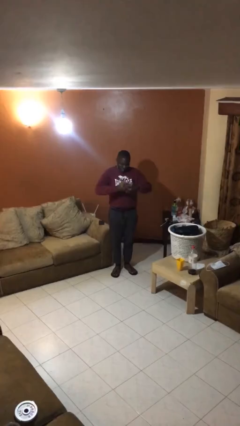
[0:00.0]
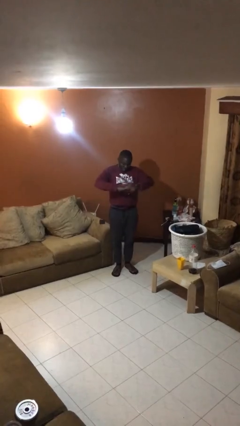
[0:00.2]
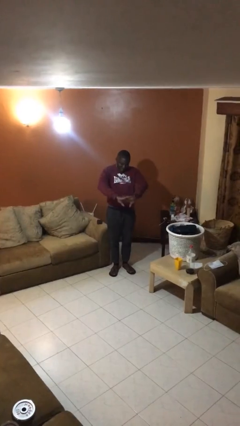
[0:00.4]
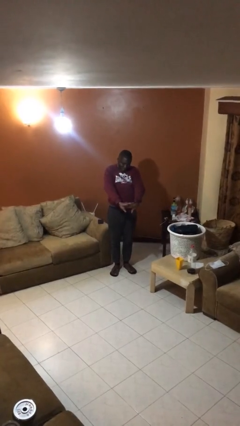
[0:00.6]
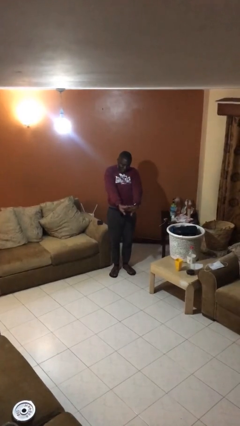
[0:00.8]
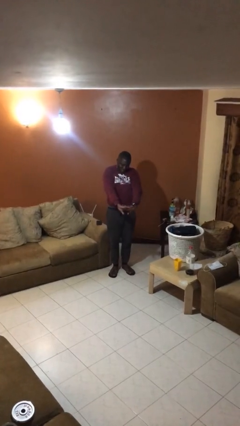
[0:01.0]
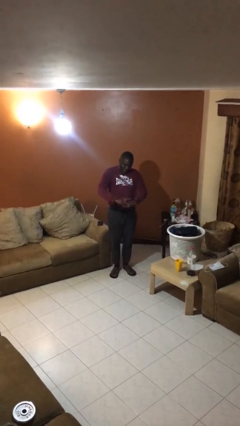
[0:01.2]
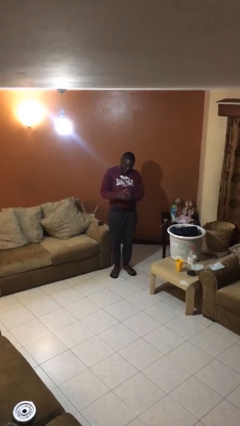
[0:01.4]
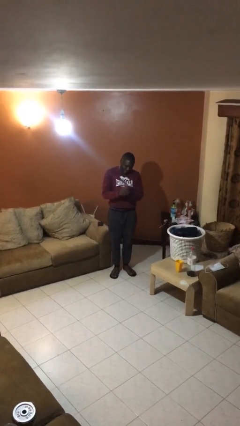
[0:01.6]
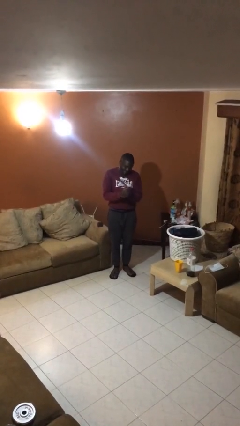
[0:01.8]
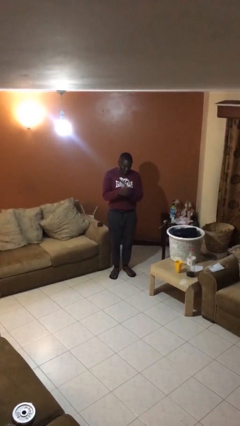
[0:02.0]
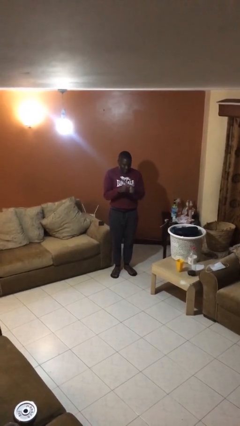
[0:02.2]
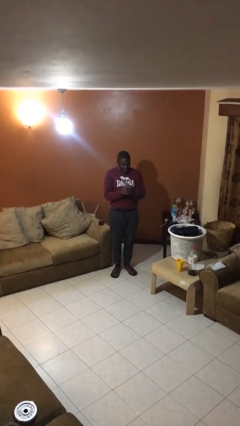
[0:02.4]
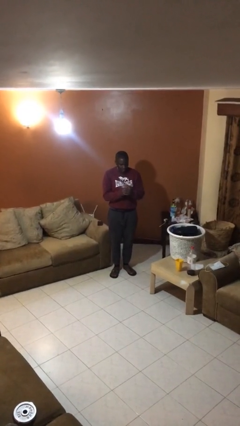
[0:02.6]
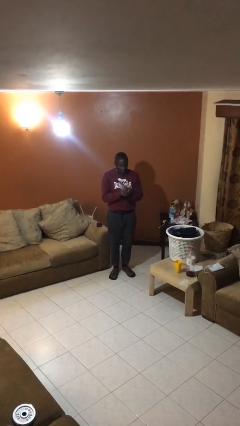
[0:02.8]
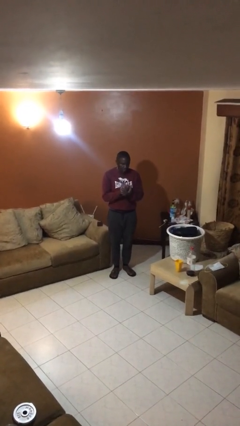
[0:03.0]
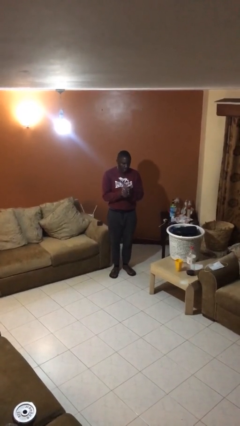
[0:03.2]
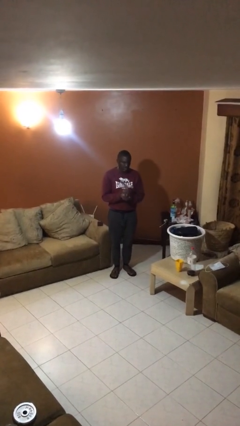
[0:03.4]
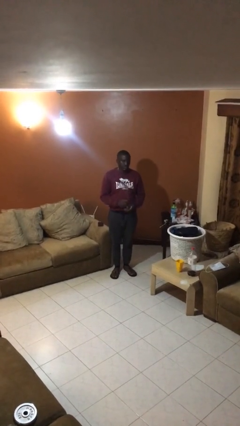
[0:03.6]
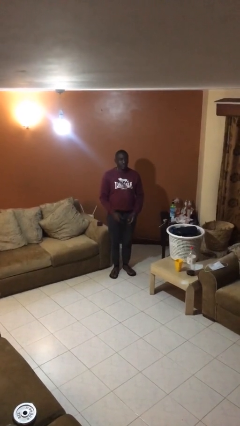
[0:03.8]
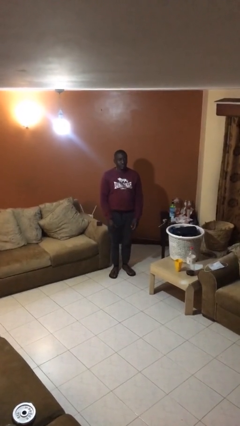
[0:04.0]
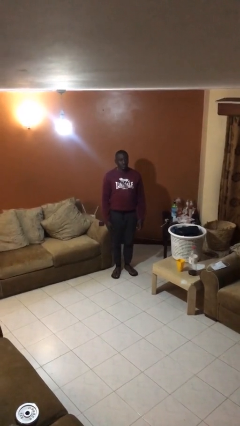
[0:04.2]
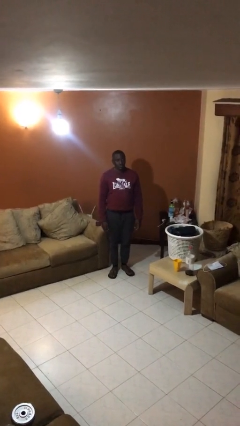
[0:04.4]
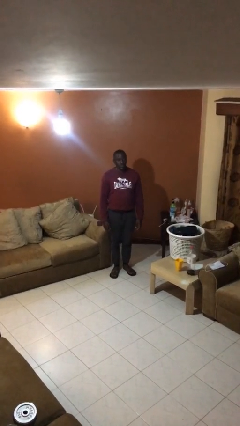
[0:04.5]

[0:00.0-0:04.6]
person cracks knuckles

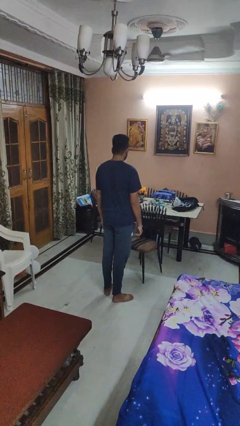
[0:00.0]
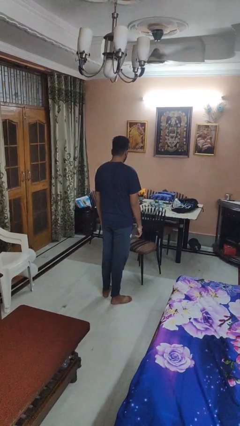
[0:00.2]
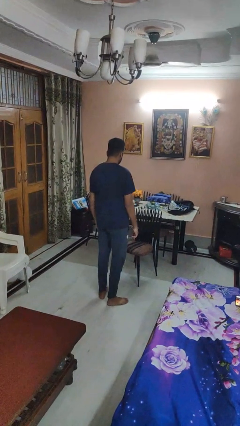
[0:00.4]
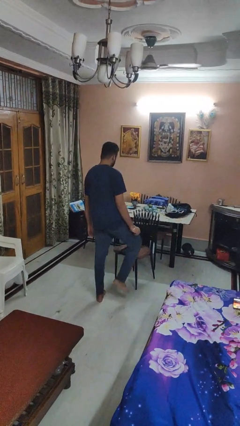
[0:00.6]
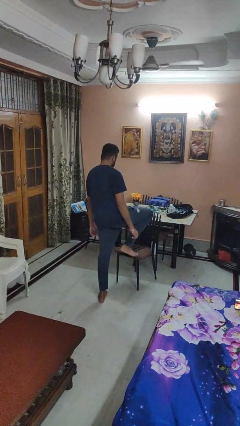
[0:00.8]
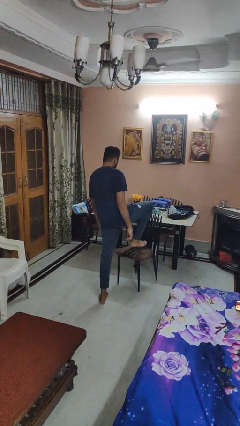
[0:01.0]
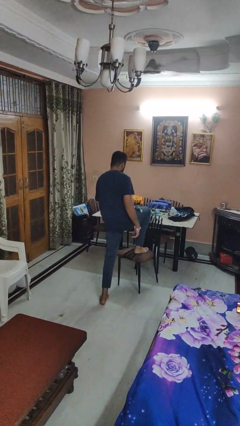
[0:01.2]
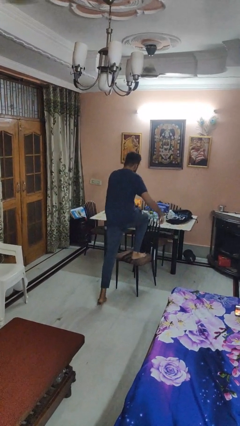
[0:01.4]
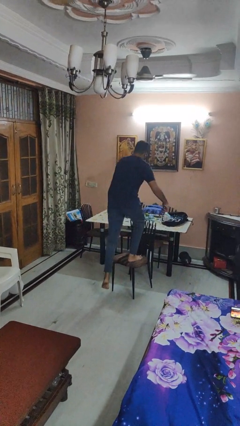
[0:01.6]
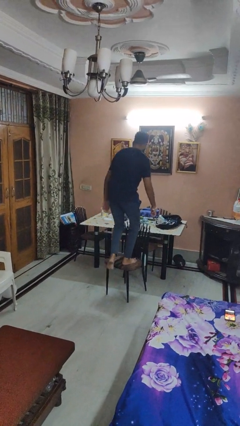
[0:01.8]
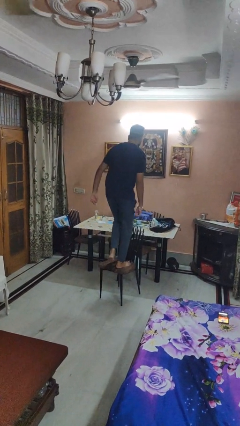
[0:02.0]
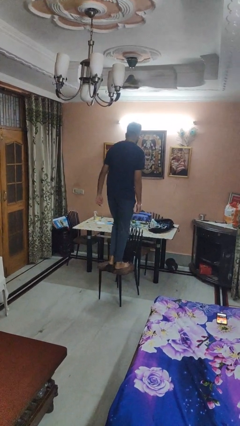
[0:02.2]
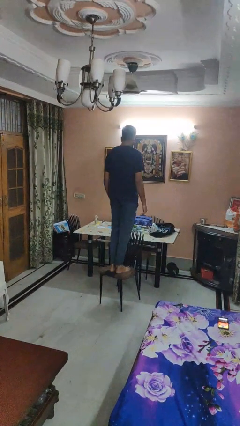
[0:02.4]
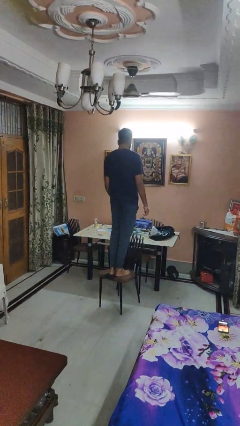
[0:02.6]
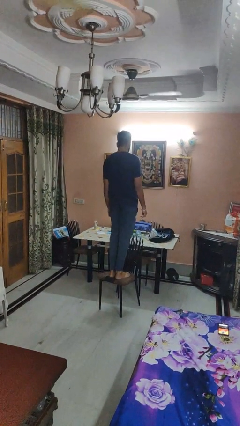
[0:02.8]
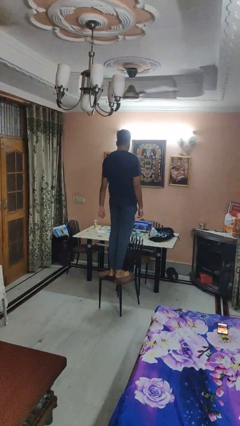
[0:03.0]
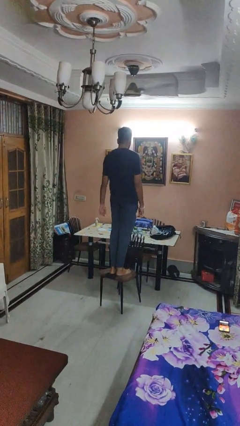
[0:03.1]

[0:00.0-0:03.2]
person climbs on chair

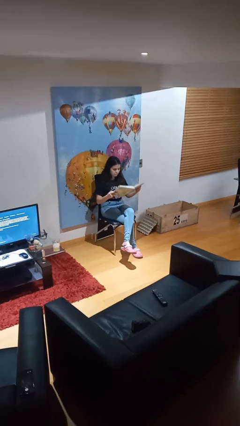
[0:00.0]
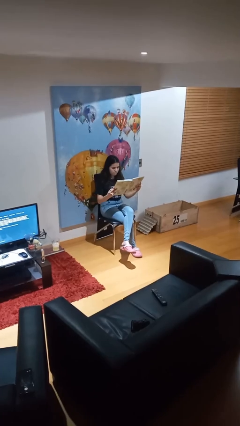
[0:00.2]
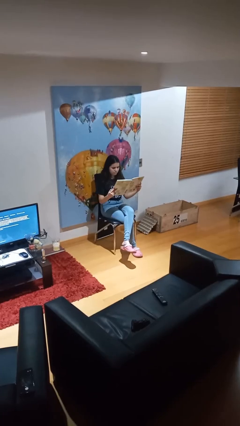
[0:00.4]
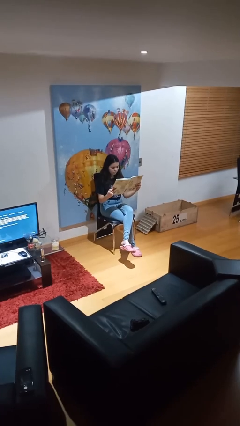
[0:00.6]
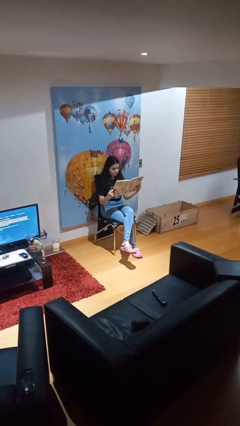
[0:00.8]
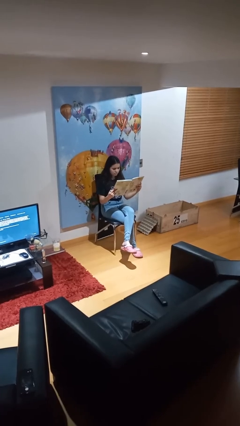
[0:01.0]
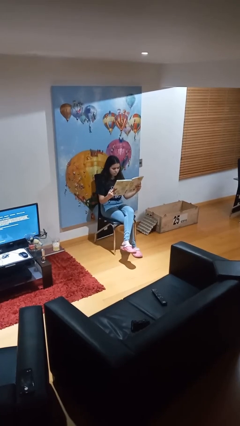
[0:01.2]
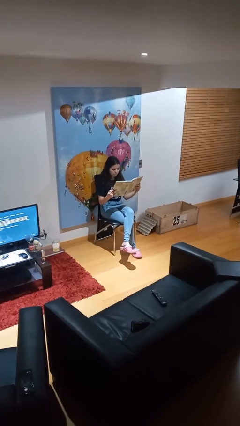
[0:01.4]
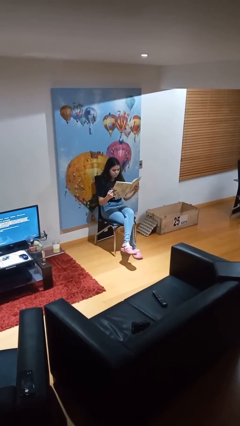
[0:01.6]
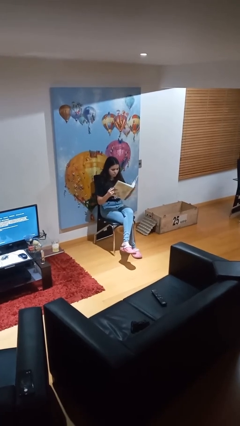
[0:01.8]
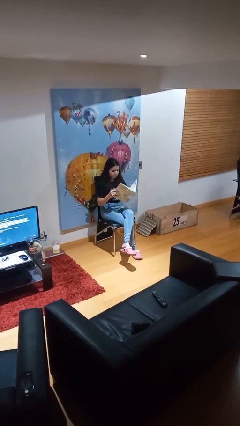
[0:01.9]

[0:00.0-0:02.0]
person reads document

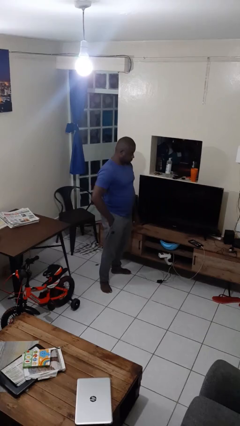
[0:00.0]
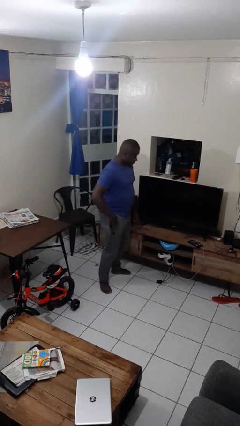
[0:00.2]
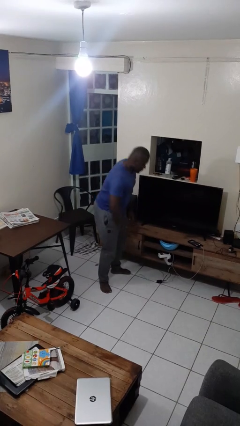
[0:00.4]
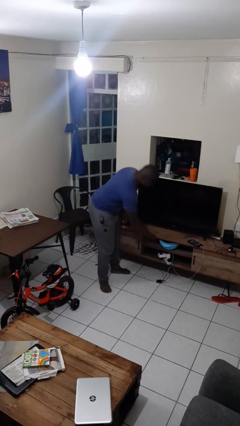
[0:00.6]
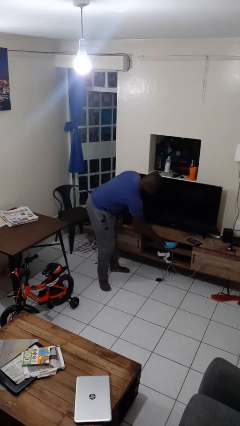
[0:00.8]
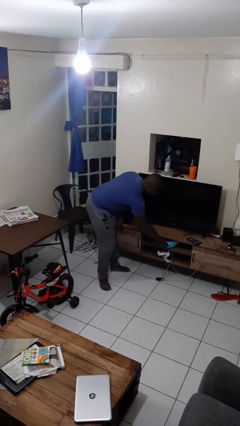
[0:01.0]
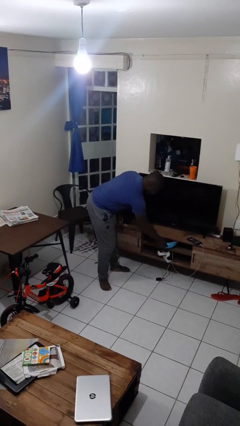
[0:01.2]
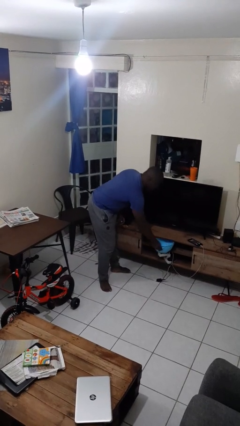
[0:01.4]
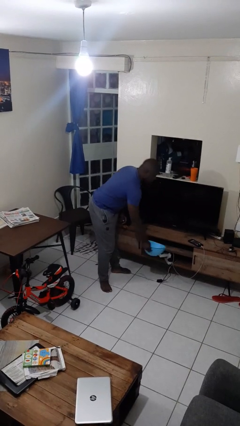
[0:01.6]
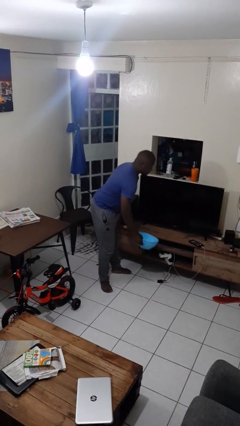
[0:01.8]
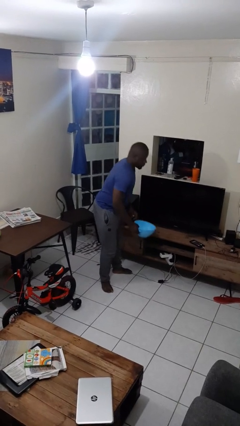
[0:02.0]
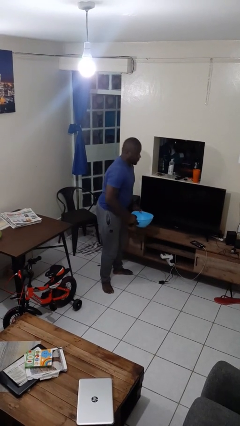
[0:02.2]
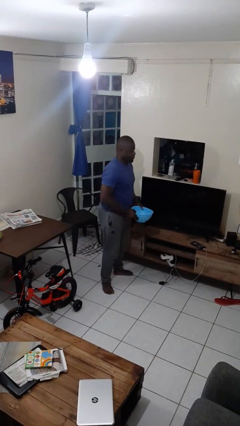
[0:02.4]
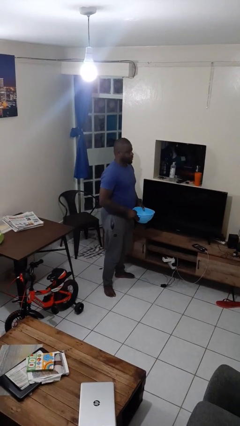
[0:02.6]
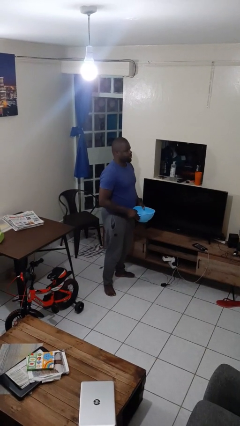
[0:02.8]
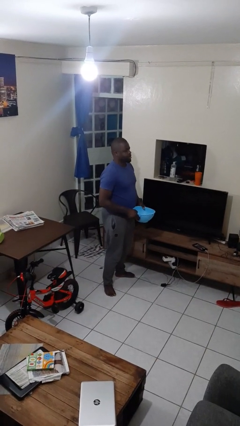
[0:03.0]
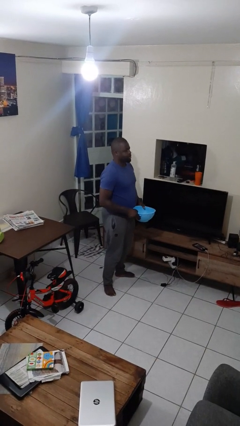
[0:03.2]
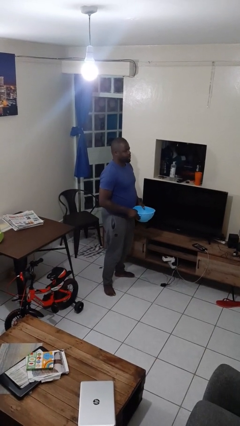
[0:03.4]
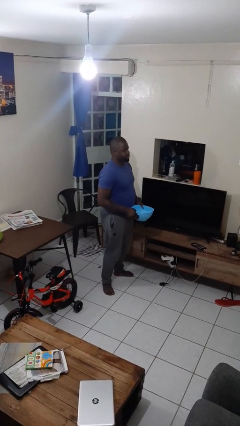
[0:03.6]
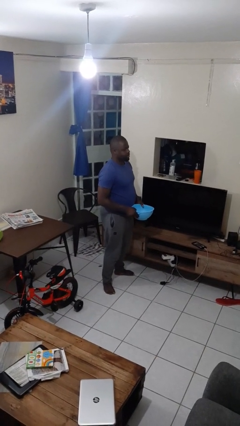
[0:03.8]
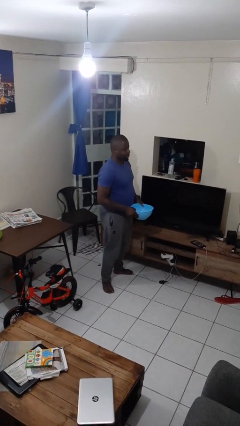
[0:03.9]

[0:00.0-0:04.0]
person picks up object from cabinet

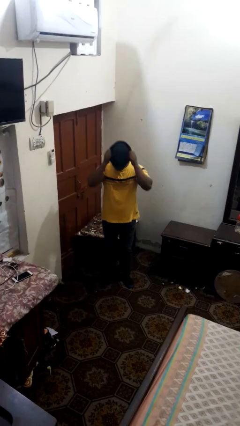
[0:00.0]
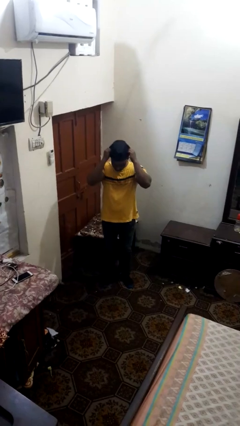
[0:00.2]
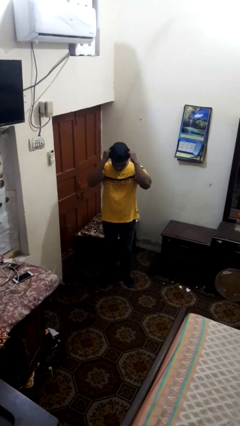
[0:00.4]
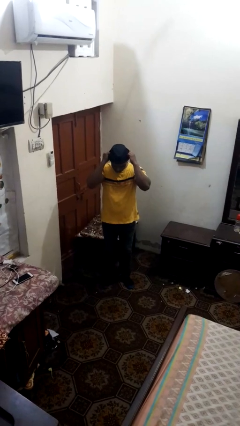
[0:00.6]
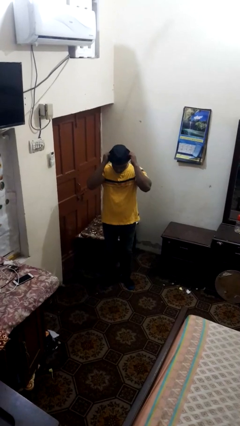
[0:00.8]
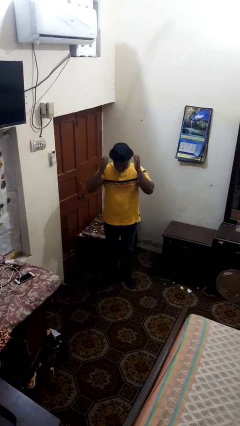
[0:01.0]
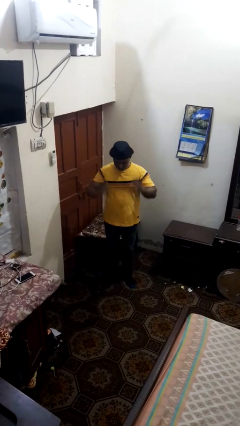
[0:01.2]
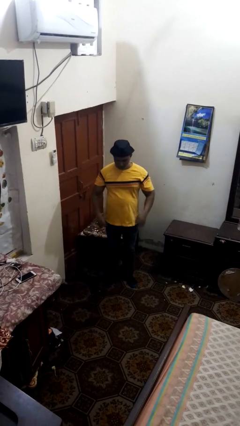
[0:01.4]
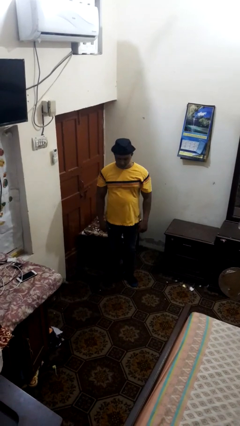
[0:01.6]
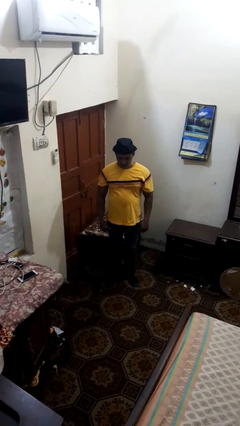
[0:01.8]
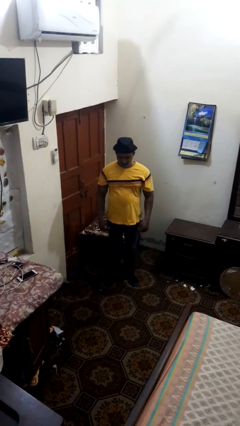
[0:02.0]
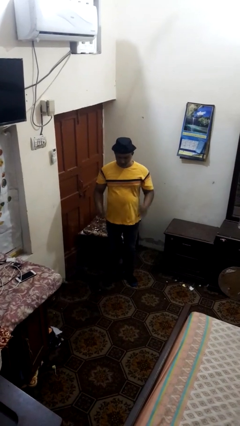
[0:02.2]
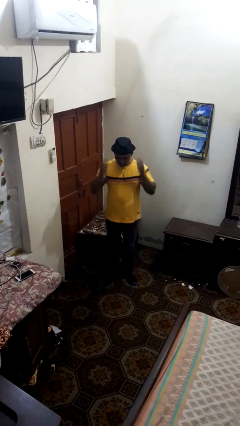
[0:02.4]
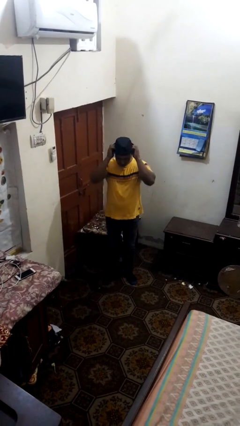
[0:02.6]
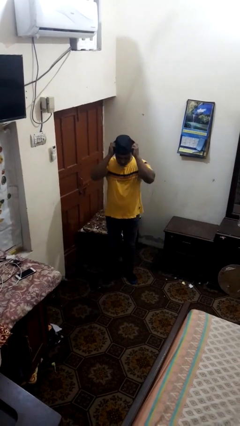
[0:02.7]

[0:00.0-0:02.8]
person puts on hat

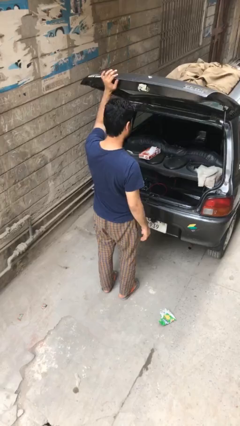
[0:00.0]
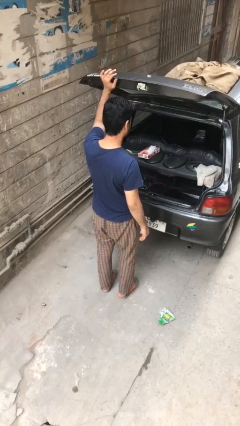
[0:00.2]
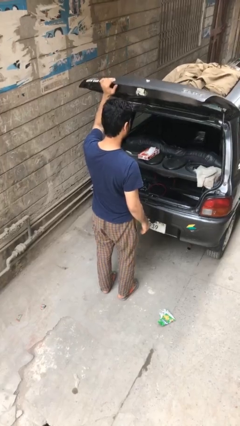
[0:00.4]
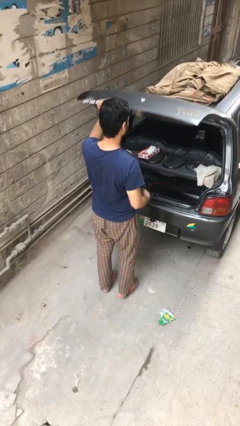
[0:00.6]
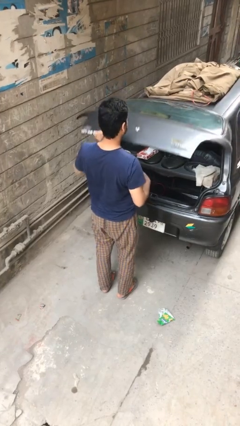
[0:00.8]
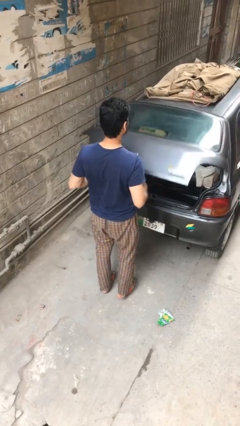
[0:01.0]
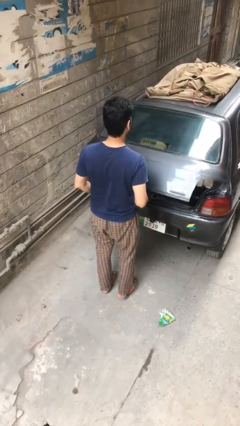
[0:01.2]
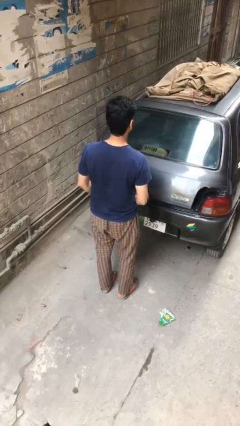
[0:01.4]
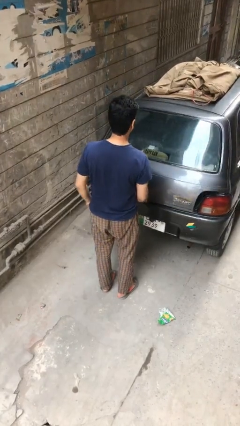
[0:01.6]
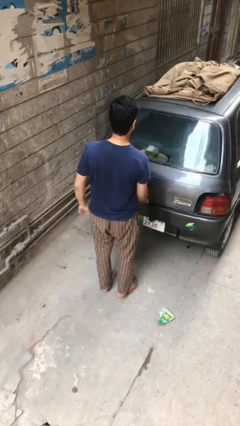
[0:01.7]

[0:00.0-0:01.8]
person closes car trunk
